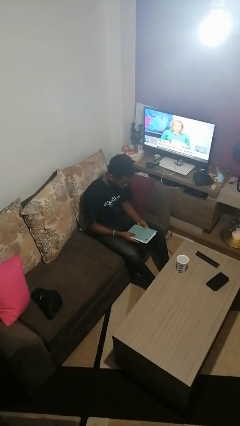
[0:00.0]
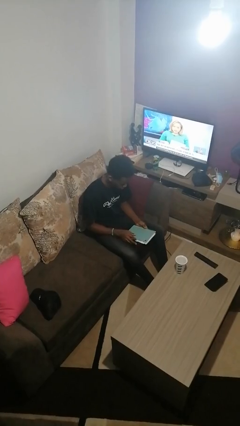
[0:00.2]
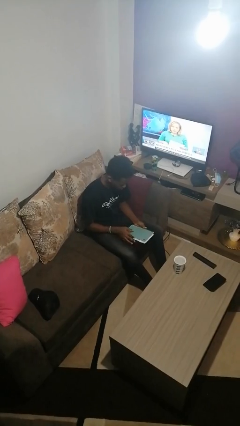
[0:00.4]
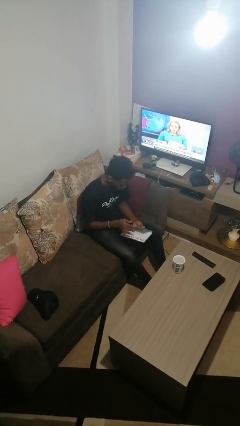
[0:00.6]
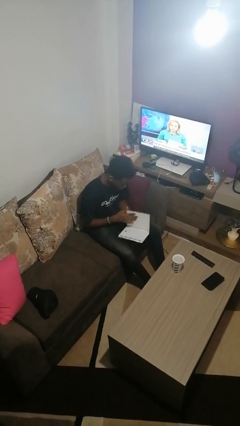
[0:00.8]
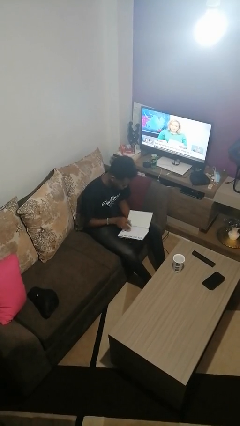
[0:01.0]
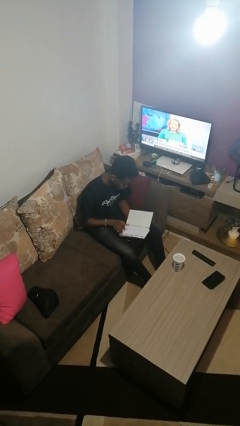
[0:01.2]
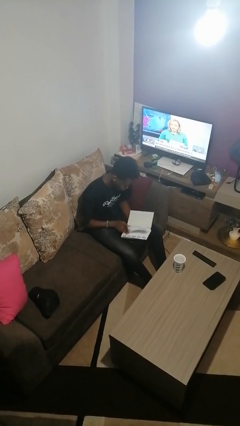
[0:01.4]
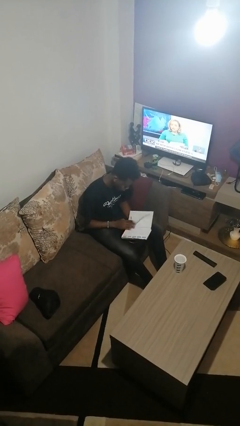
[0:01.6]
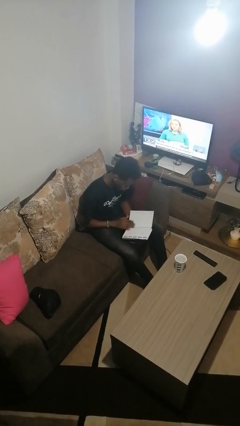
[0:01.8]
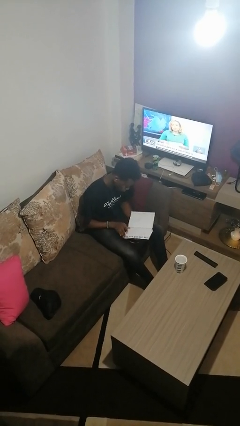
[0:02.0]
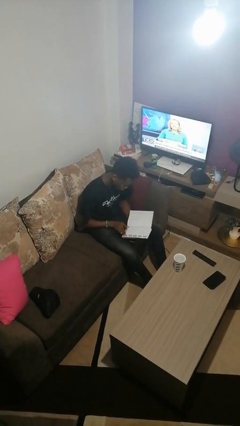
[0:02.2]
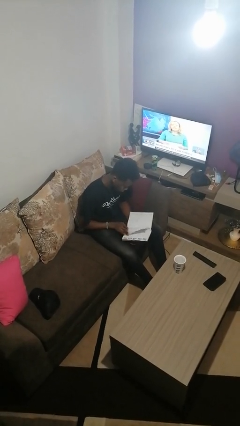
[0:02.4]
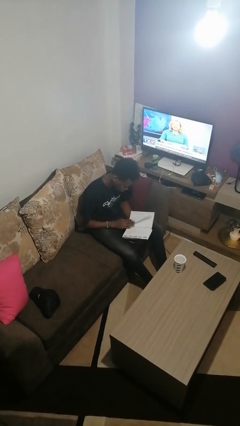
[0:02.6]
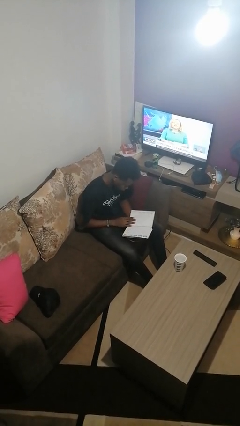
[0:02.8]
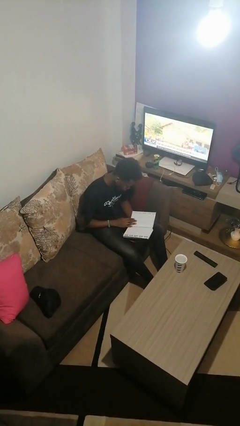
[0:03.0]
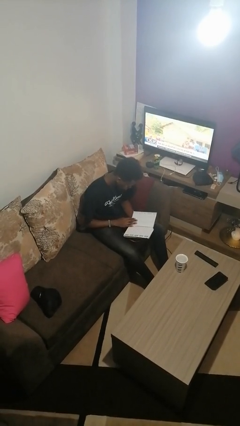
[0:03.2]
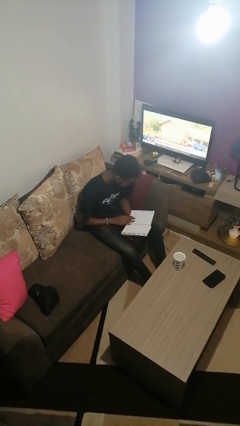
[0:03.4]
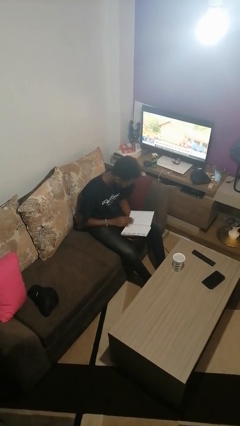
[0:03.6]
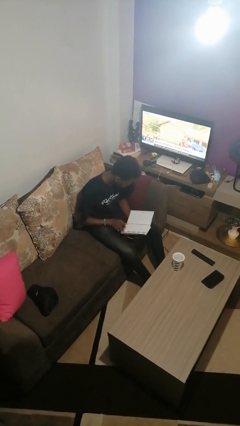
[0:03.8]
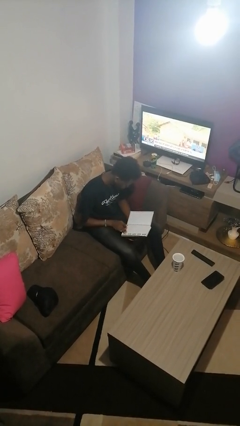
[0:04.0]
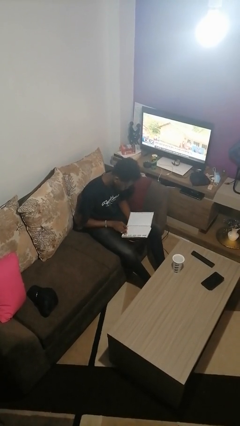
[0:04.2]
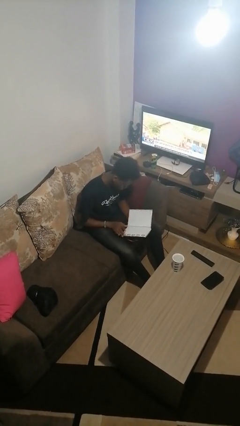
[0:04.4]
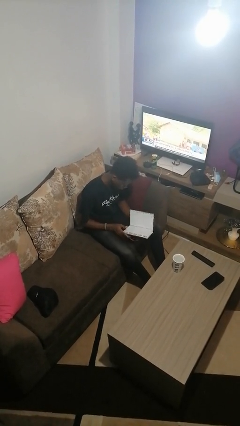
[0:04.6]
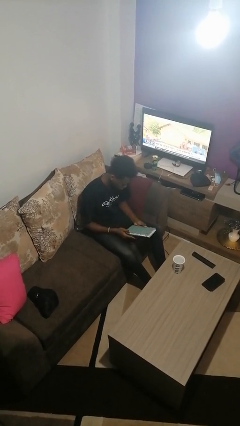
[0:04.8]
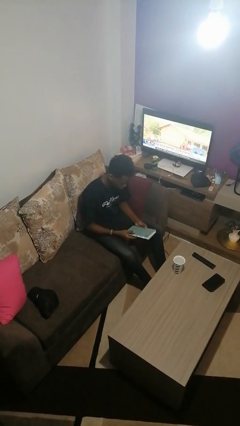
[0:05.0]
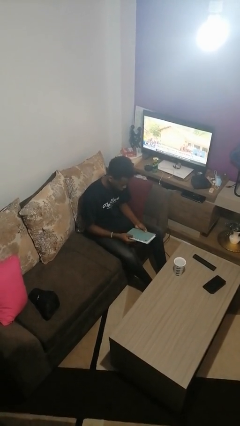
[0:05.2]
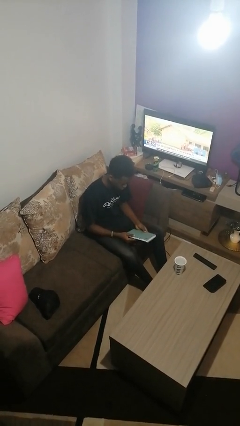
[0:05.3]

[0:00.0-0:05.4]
person reads book

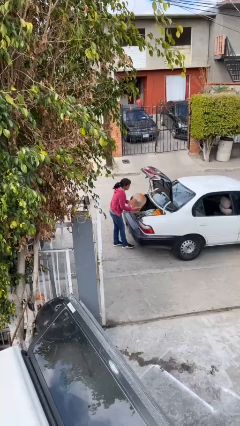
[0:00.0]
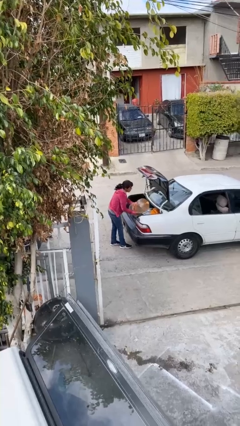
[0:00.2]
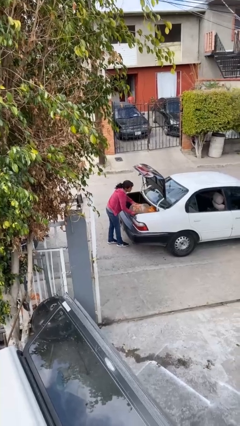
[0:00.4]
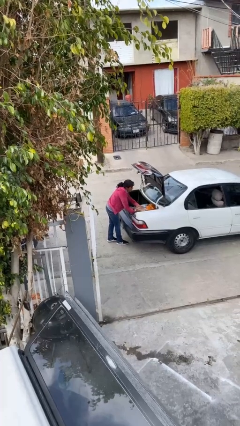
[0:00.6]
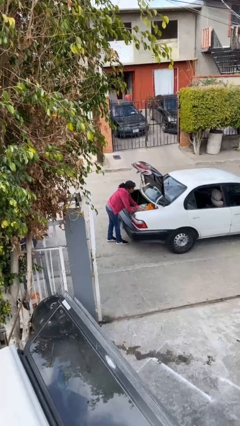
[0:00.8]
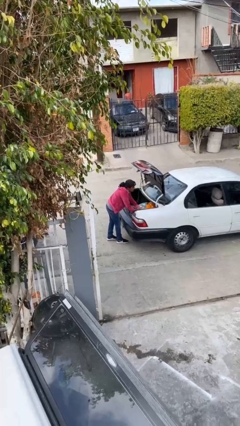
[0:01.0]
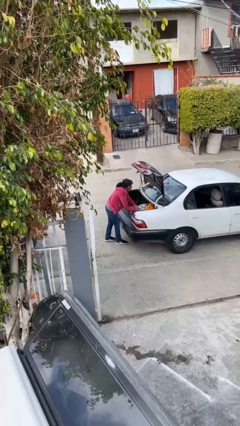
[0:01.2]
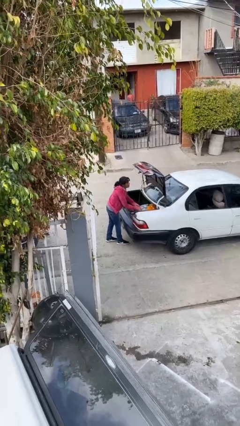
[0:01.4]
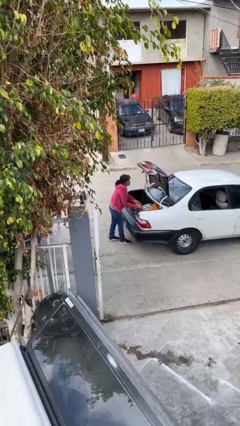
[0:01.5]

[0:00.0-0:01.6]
person loads car

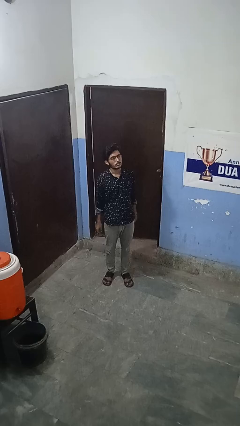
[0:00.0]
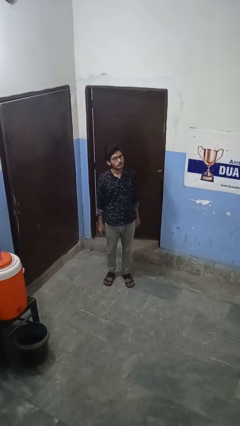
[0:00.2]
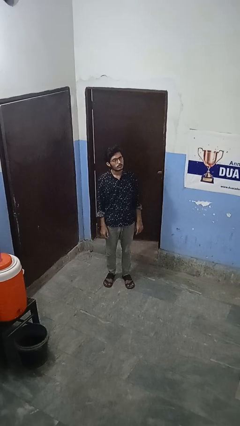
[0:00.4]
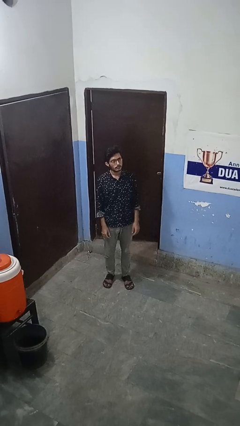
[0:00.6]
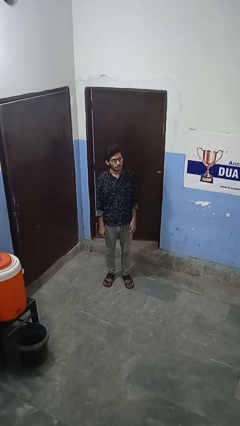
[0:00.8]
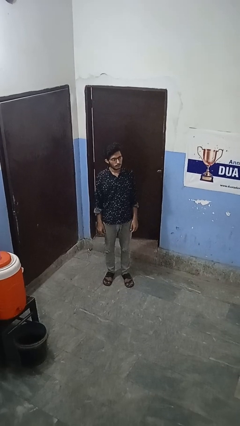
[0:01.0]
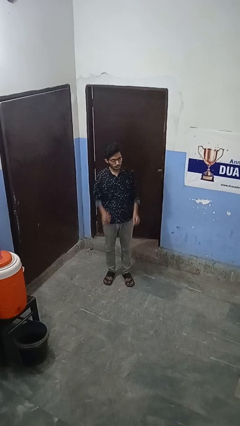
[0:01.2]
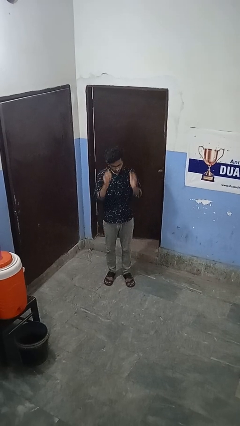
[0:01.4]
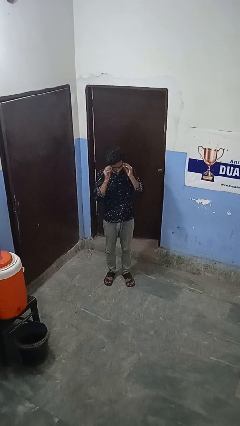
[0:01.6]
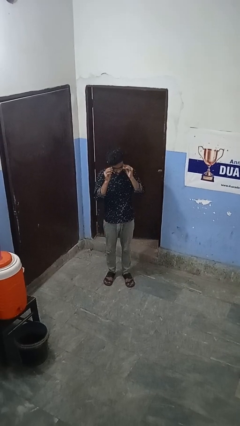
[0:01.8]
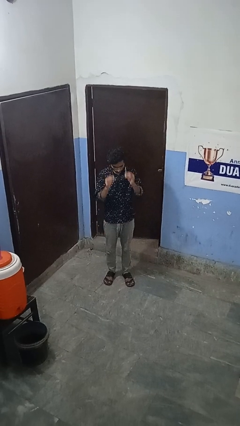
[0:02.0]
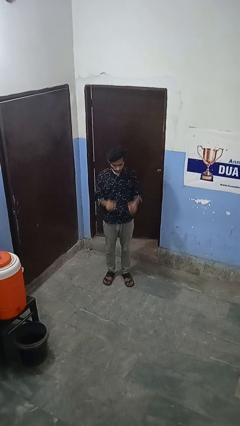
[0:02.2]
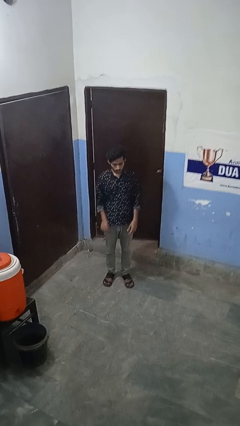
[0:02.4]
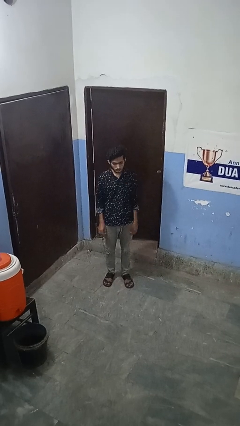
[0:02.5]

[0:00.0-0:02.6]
person takes off glasses

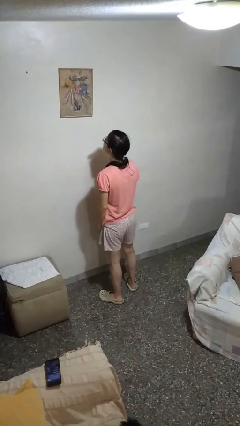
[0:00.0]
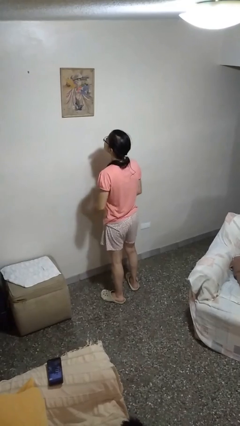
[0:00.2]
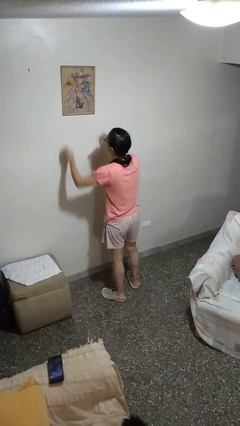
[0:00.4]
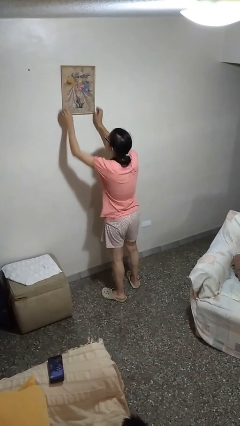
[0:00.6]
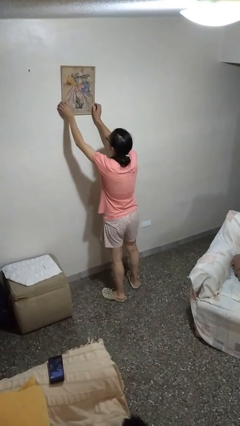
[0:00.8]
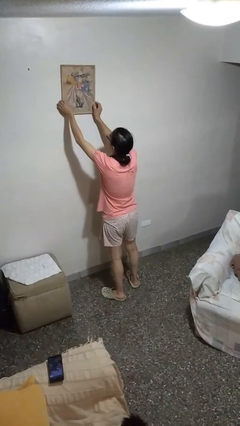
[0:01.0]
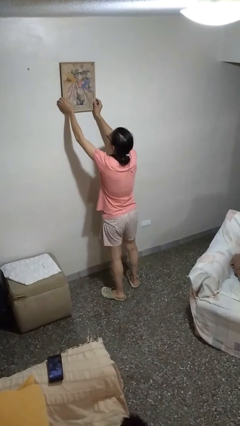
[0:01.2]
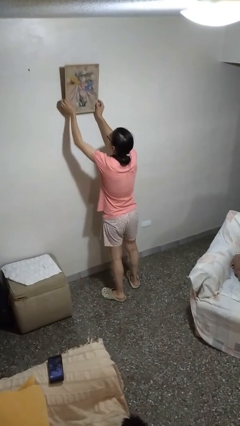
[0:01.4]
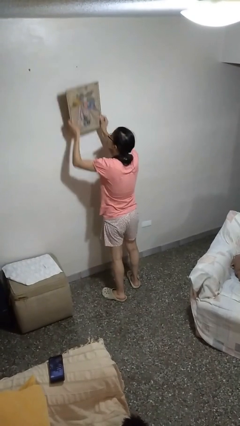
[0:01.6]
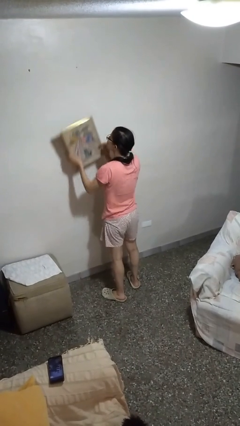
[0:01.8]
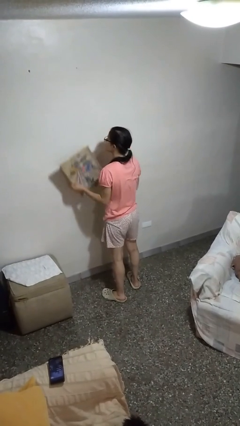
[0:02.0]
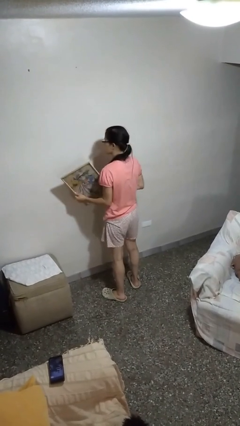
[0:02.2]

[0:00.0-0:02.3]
person takes down picture frame

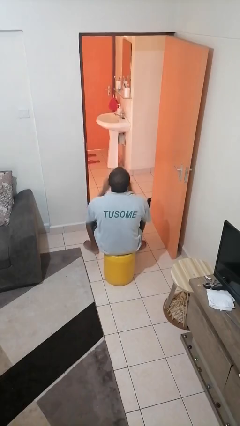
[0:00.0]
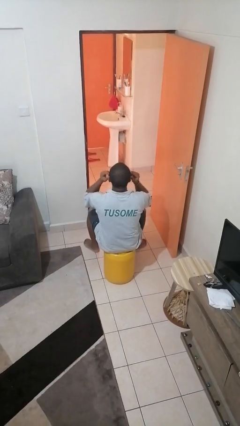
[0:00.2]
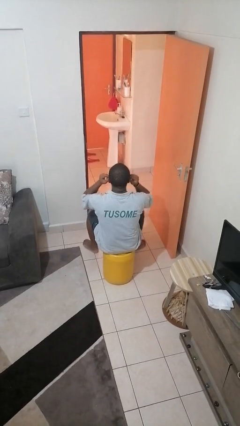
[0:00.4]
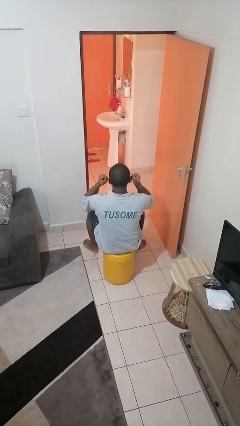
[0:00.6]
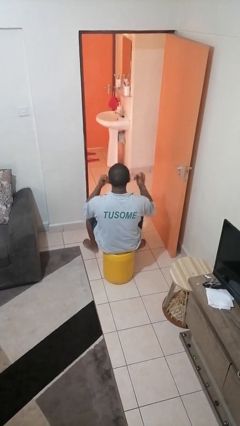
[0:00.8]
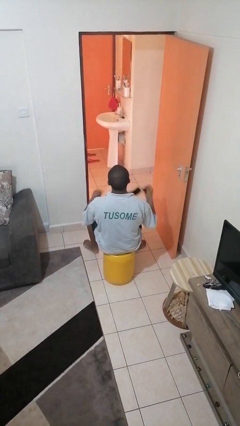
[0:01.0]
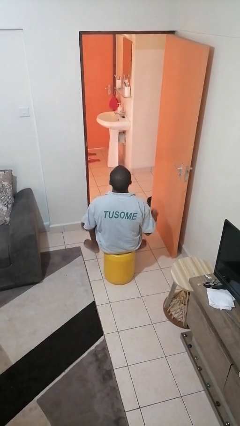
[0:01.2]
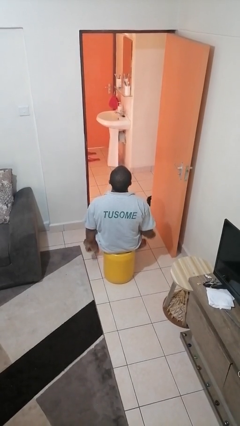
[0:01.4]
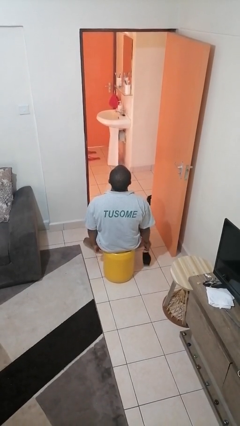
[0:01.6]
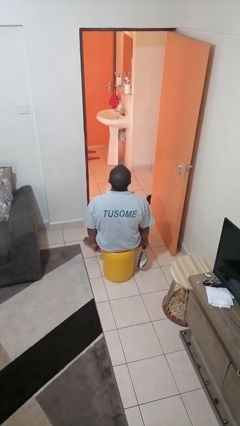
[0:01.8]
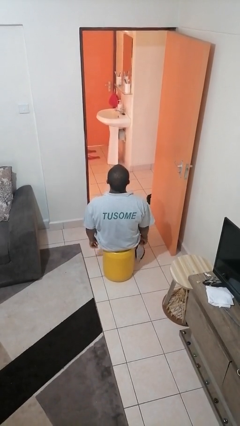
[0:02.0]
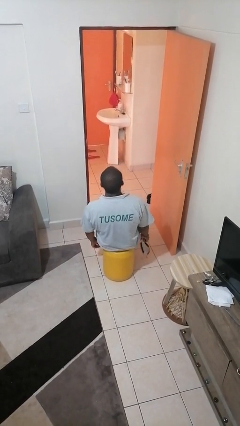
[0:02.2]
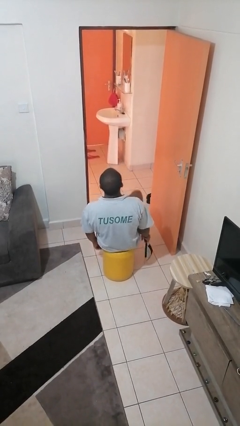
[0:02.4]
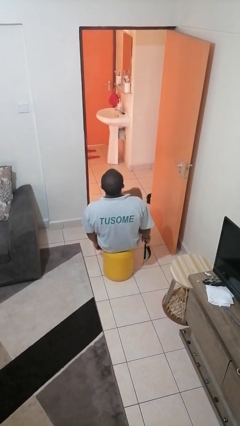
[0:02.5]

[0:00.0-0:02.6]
person takes off facemask

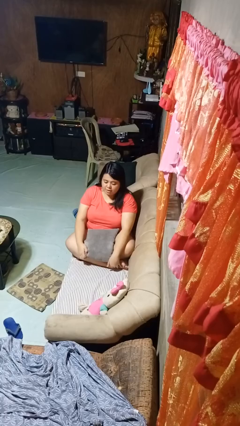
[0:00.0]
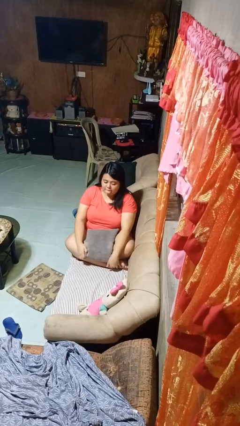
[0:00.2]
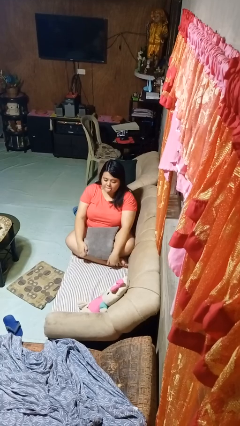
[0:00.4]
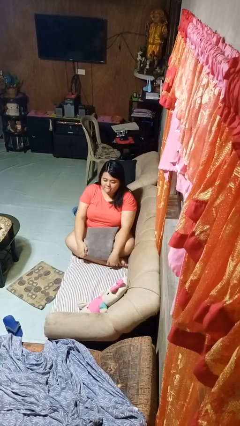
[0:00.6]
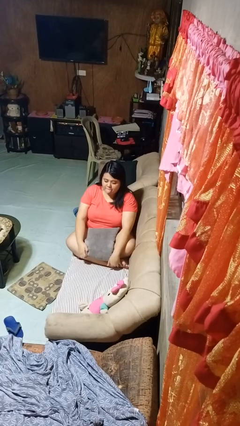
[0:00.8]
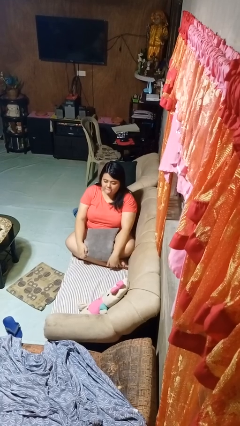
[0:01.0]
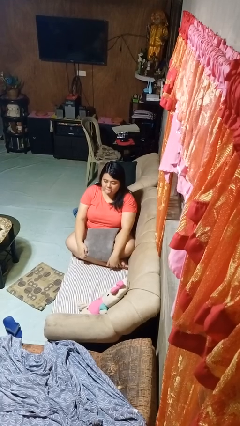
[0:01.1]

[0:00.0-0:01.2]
person sticks out tongue

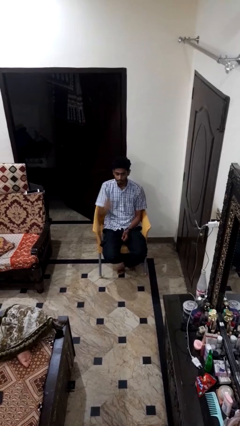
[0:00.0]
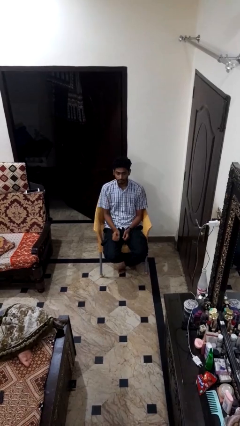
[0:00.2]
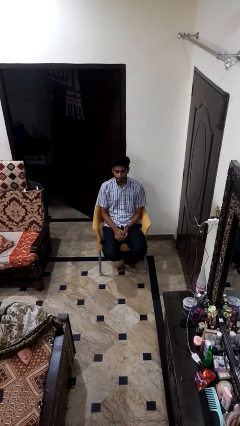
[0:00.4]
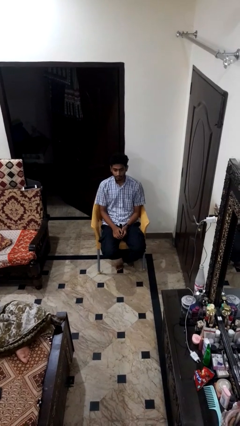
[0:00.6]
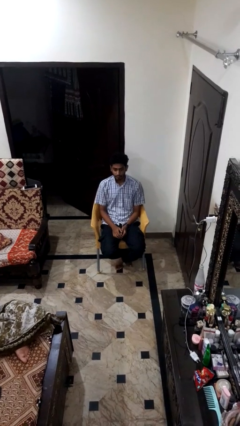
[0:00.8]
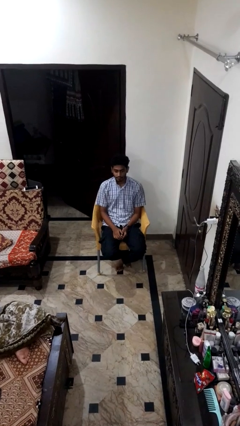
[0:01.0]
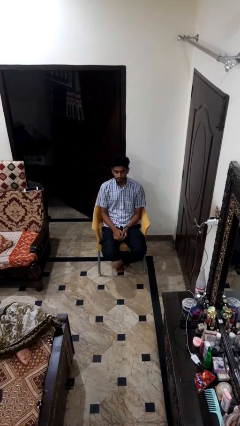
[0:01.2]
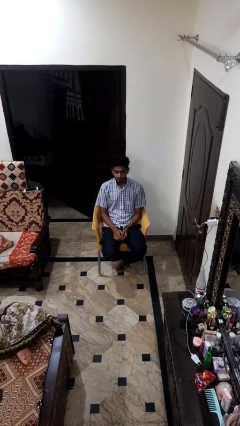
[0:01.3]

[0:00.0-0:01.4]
person gestures lower hand
